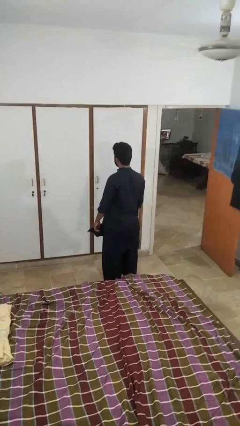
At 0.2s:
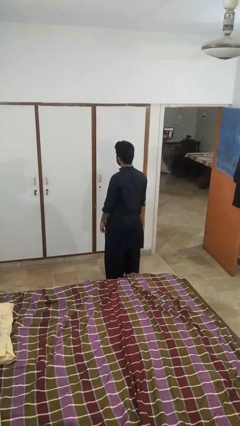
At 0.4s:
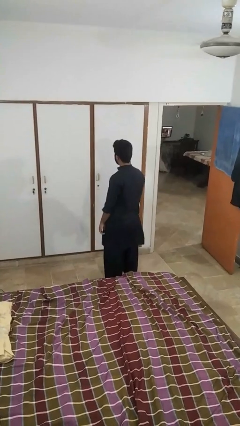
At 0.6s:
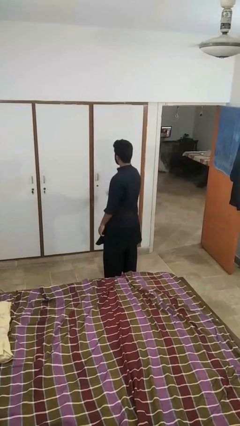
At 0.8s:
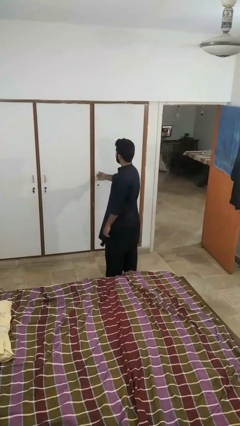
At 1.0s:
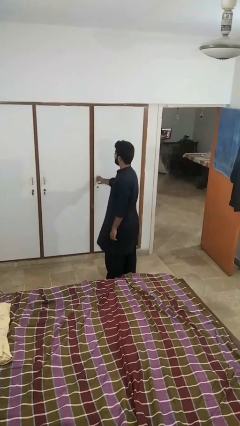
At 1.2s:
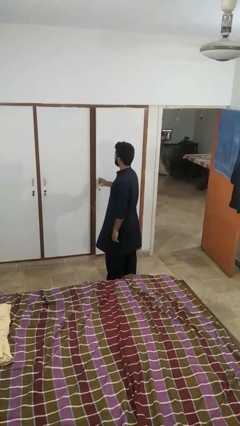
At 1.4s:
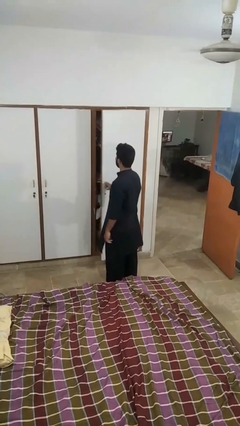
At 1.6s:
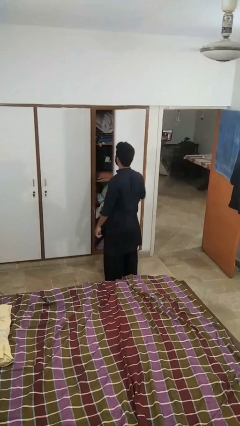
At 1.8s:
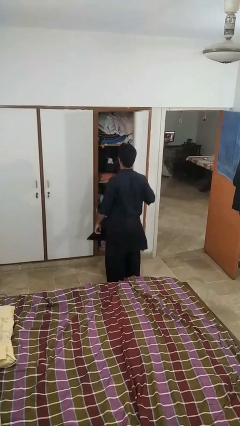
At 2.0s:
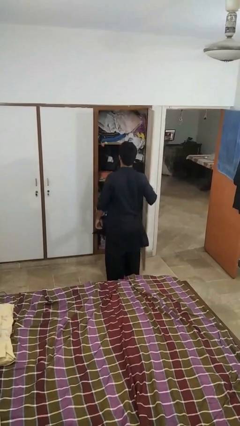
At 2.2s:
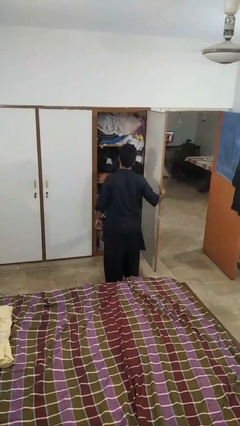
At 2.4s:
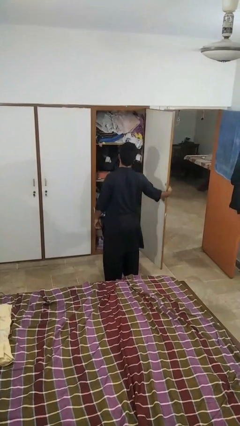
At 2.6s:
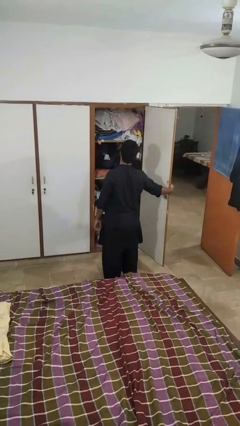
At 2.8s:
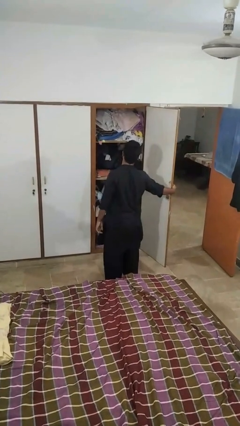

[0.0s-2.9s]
person opens closet door

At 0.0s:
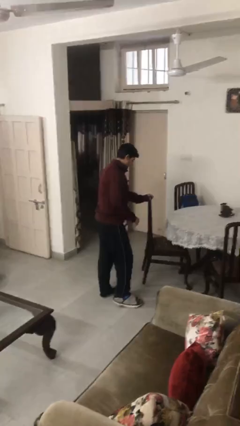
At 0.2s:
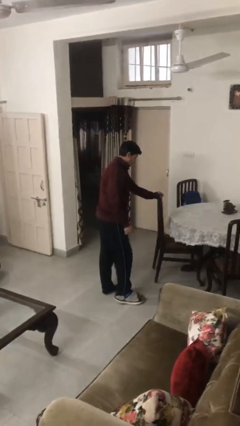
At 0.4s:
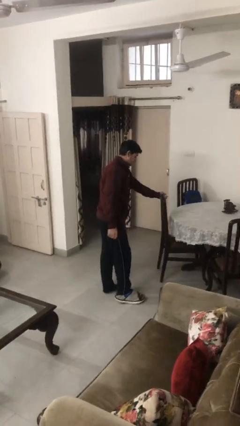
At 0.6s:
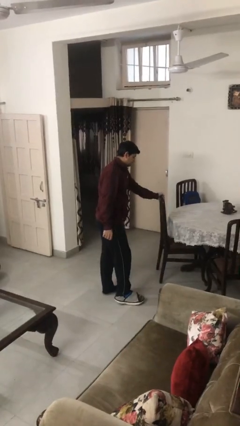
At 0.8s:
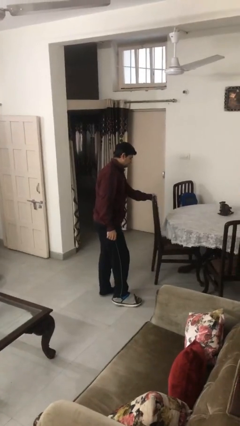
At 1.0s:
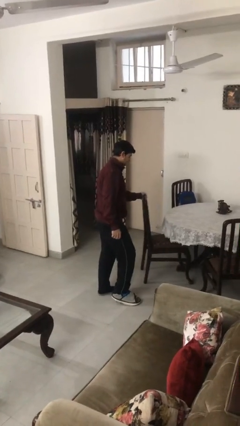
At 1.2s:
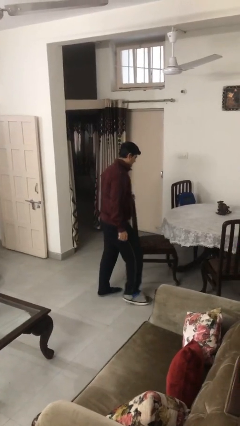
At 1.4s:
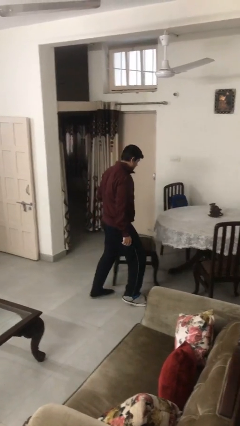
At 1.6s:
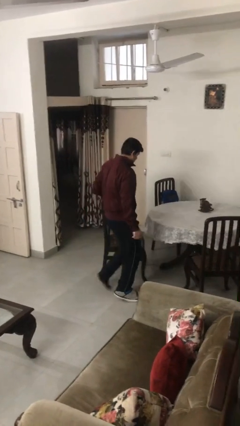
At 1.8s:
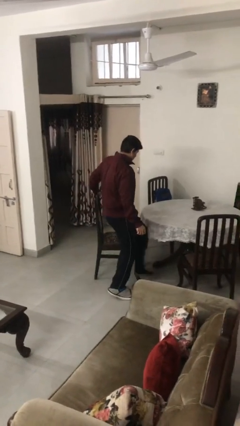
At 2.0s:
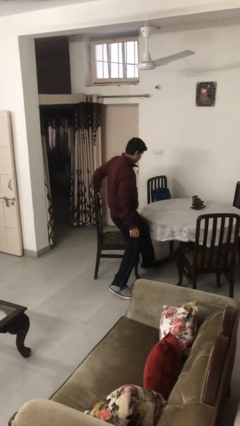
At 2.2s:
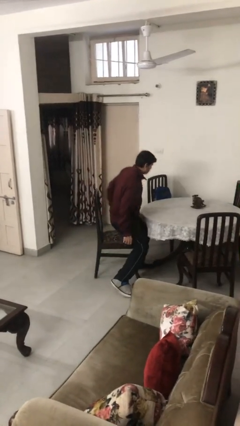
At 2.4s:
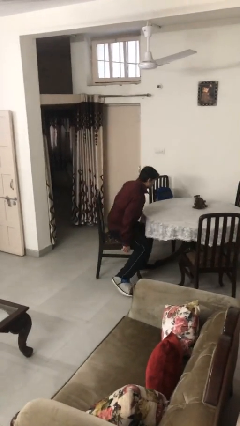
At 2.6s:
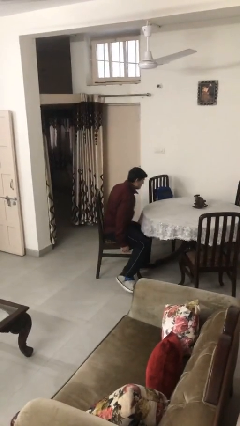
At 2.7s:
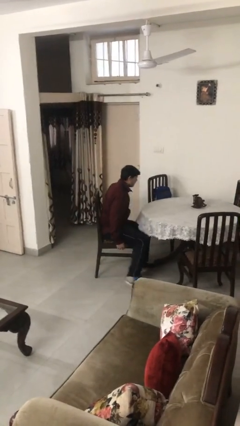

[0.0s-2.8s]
person sits down

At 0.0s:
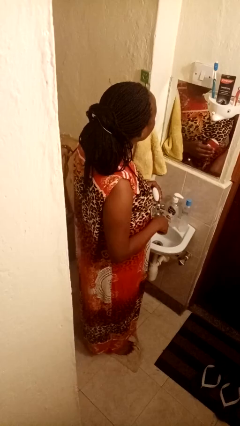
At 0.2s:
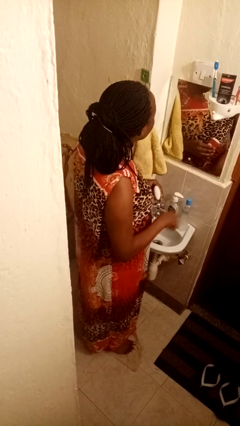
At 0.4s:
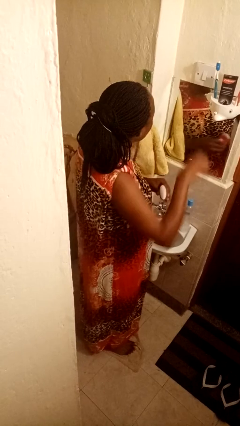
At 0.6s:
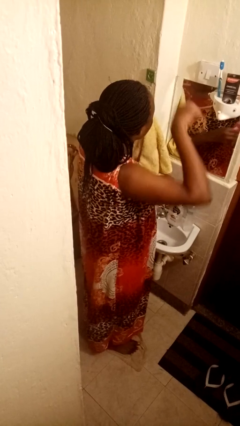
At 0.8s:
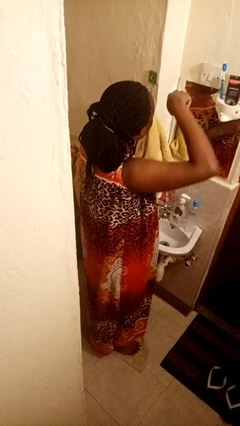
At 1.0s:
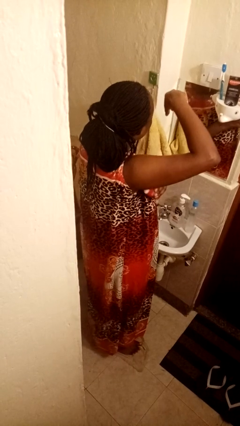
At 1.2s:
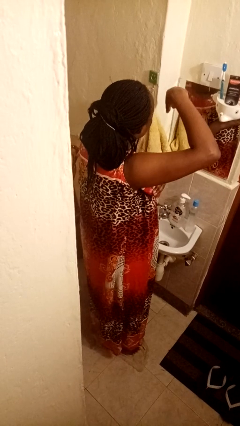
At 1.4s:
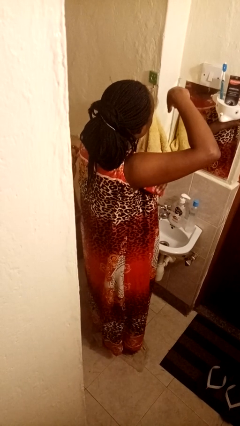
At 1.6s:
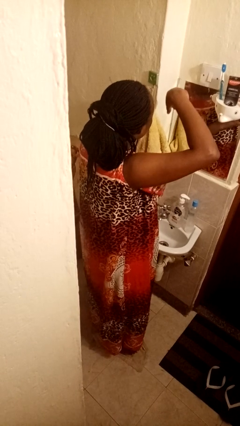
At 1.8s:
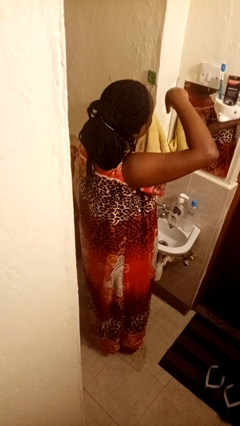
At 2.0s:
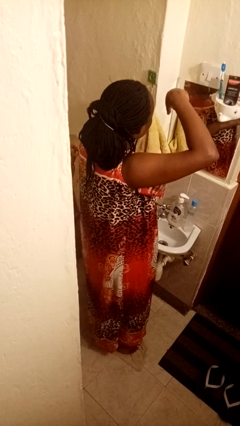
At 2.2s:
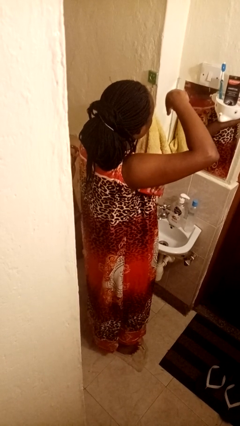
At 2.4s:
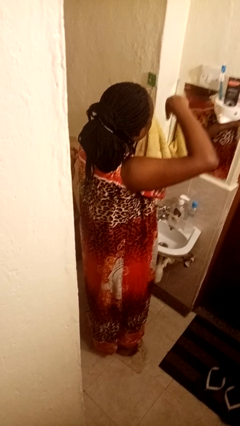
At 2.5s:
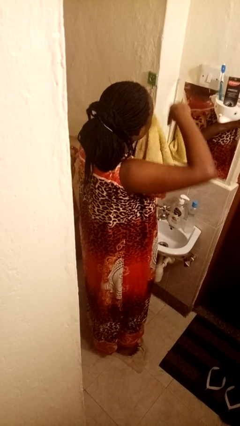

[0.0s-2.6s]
person applies deodorant

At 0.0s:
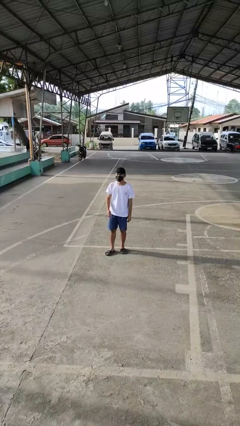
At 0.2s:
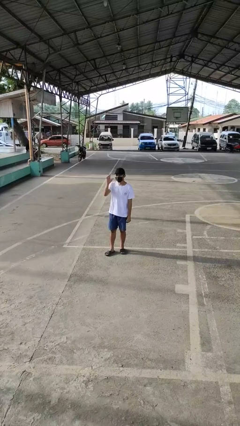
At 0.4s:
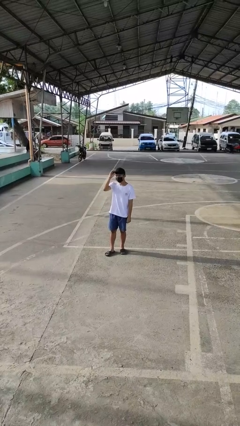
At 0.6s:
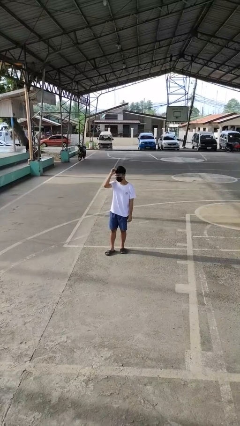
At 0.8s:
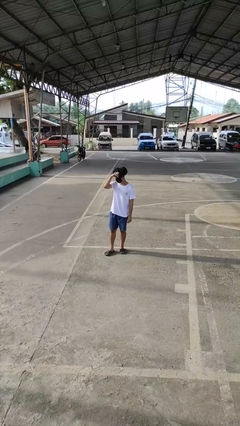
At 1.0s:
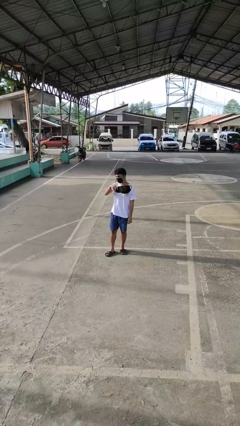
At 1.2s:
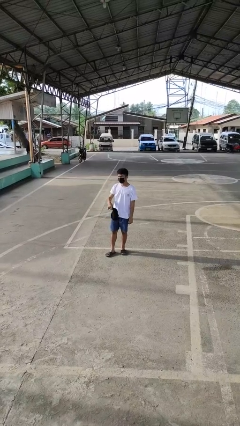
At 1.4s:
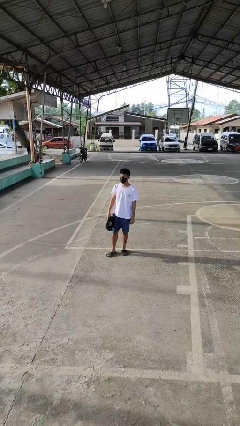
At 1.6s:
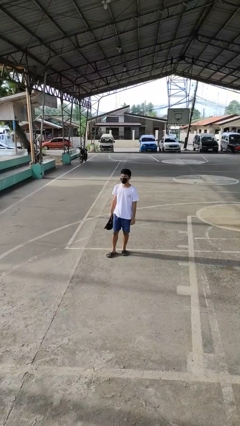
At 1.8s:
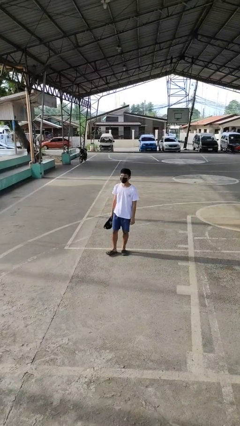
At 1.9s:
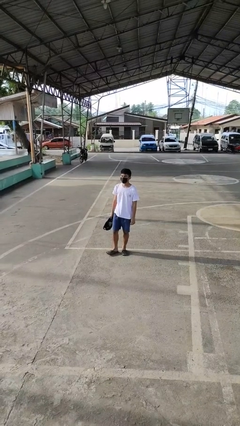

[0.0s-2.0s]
person takes off hat

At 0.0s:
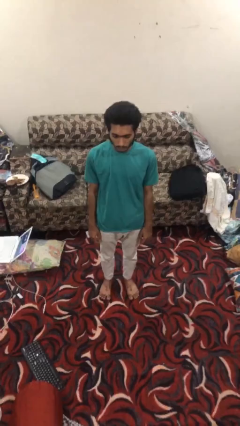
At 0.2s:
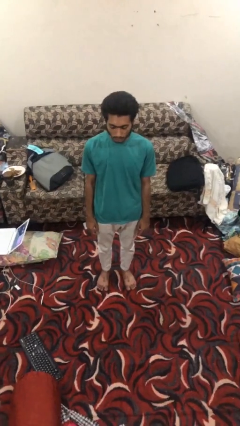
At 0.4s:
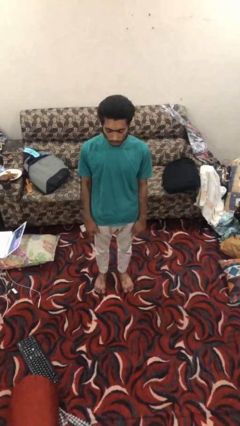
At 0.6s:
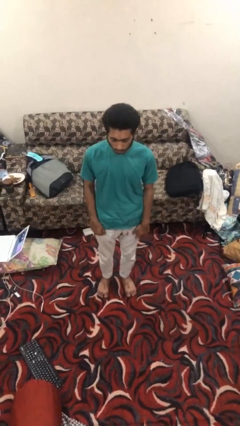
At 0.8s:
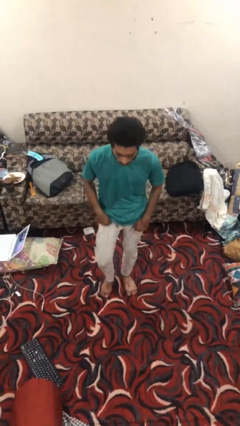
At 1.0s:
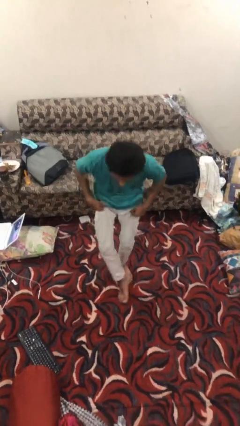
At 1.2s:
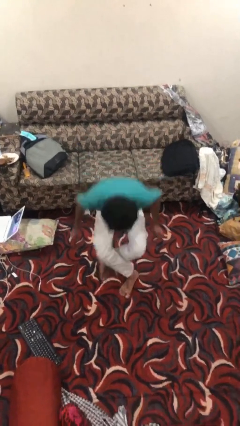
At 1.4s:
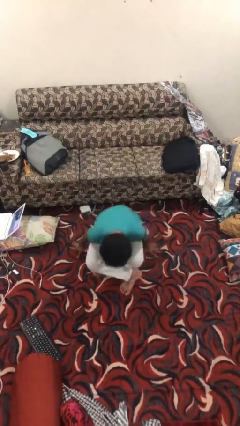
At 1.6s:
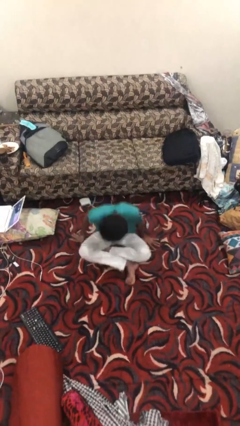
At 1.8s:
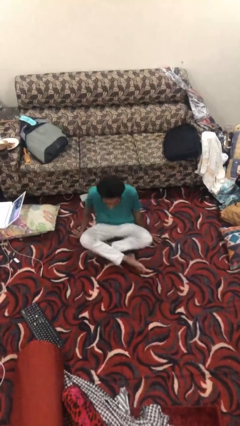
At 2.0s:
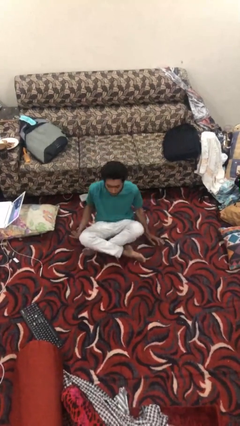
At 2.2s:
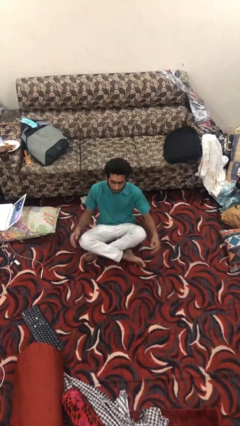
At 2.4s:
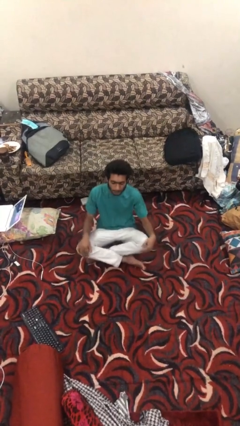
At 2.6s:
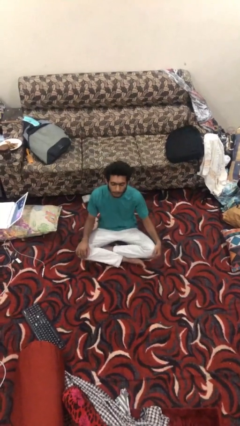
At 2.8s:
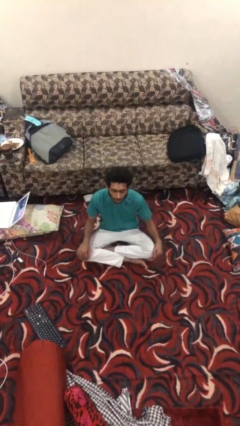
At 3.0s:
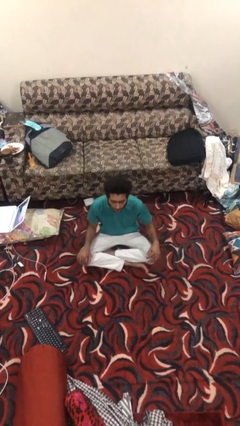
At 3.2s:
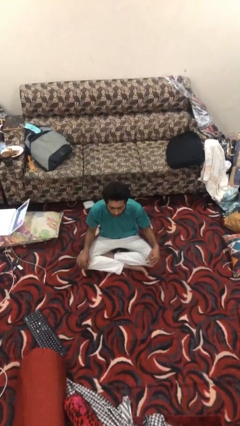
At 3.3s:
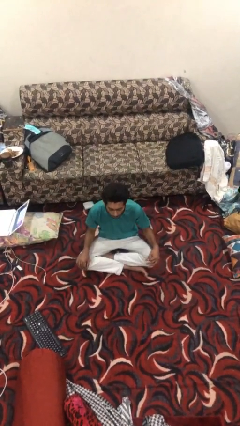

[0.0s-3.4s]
person sits crisscross

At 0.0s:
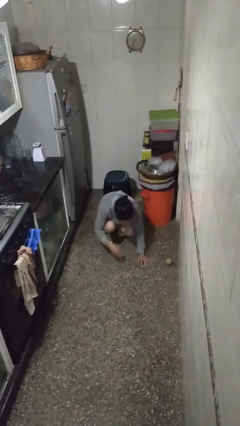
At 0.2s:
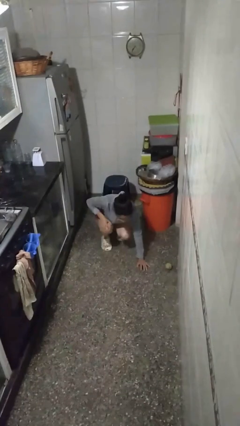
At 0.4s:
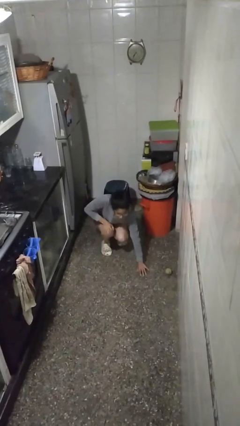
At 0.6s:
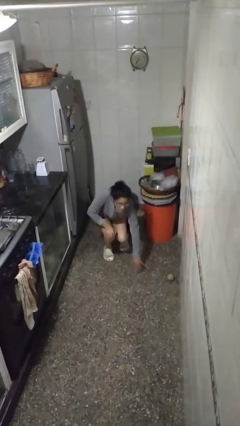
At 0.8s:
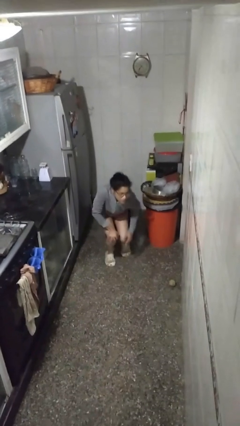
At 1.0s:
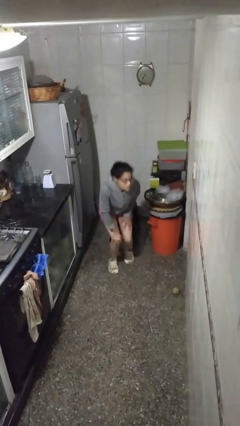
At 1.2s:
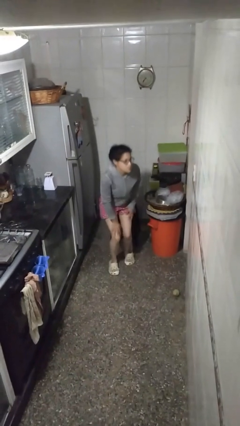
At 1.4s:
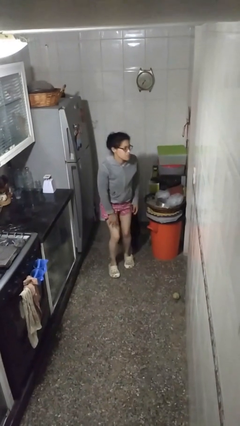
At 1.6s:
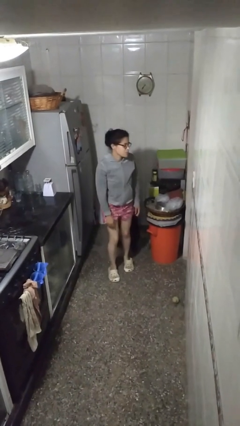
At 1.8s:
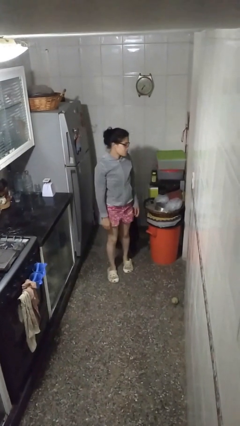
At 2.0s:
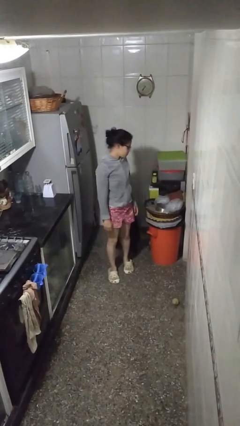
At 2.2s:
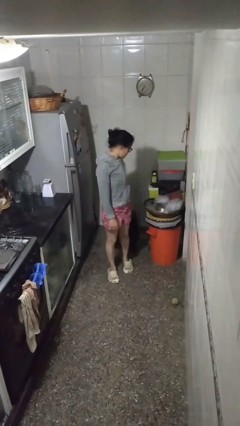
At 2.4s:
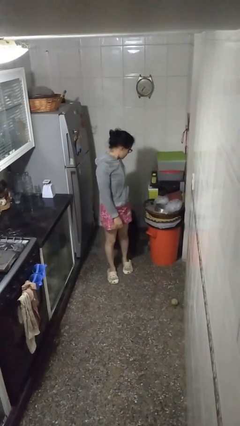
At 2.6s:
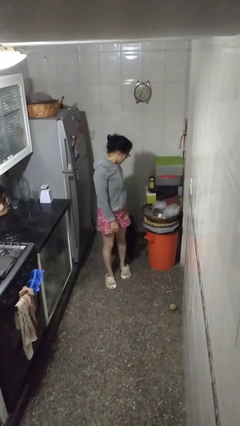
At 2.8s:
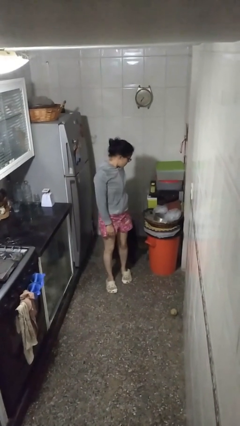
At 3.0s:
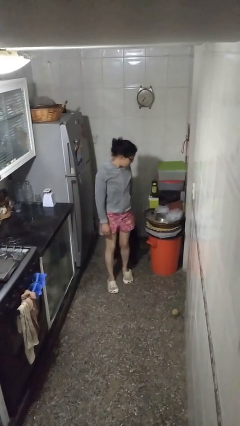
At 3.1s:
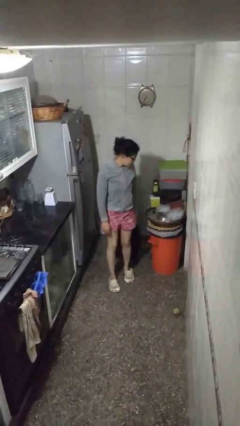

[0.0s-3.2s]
person stands up from floor

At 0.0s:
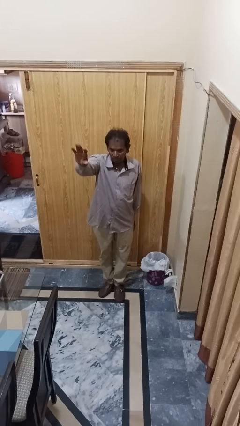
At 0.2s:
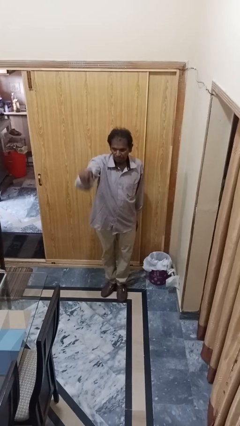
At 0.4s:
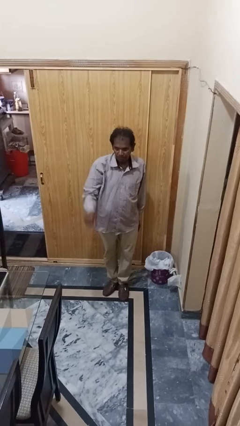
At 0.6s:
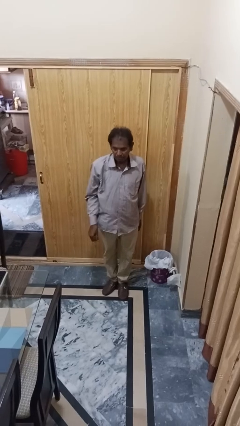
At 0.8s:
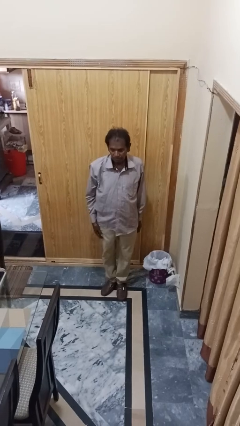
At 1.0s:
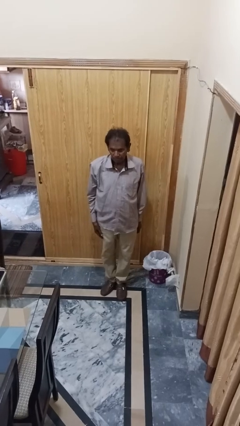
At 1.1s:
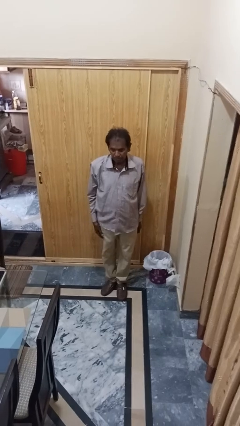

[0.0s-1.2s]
person gestures lower hand
